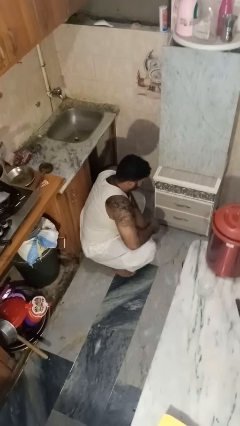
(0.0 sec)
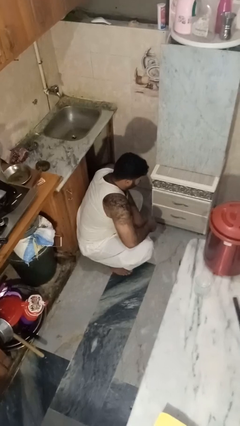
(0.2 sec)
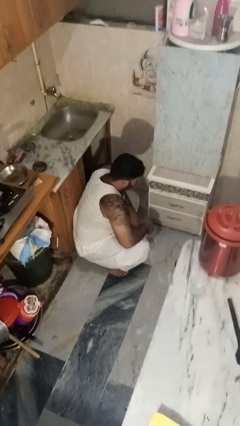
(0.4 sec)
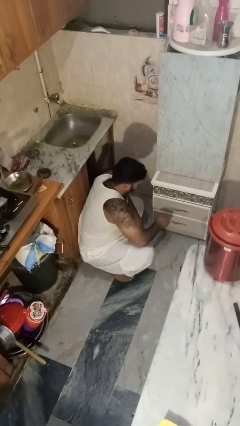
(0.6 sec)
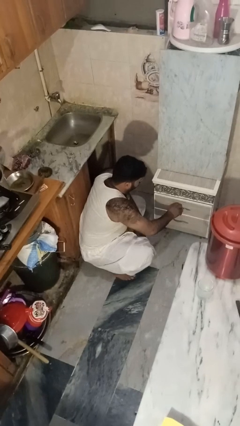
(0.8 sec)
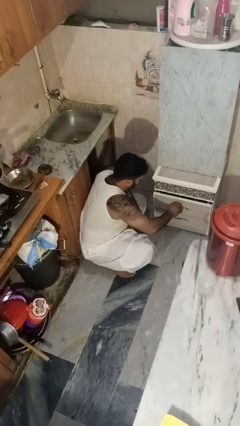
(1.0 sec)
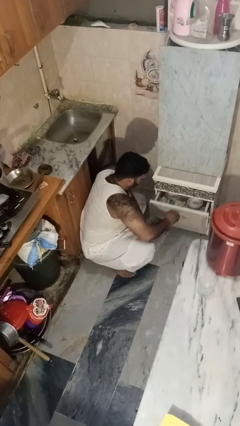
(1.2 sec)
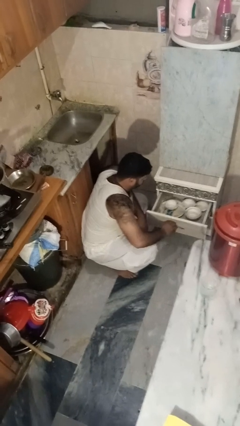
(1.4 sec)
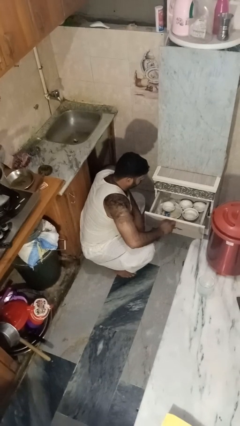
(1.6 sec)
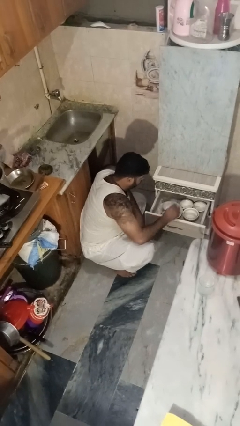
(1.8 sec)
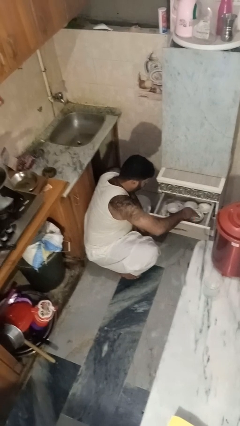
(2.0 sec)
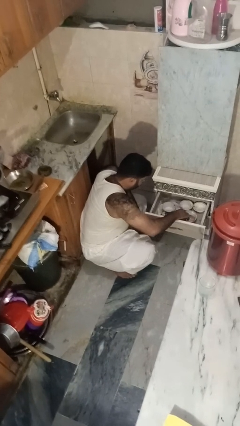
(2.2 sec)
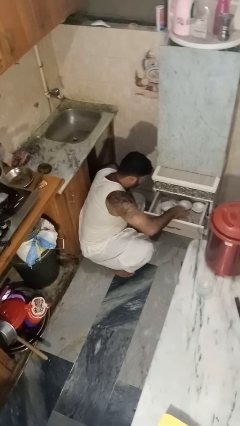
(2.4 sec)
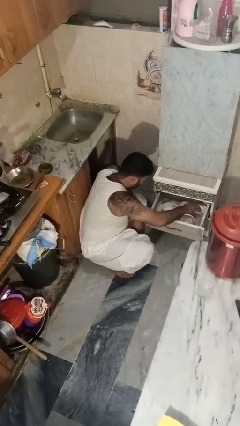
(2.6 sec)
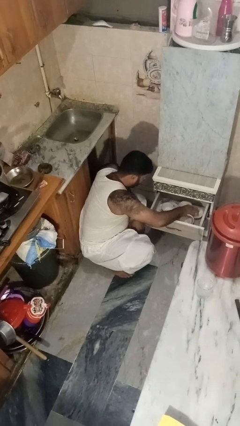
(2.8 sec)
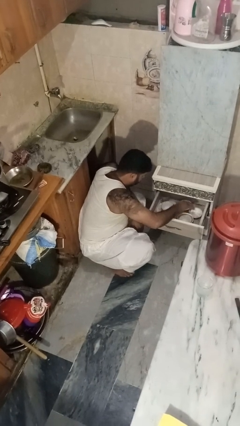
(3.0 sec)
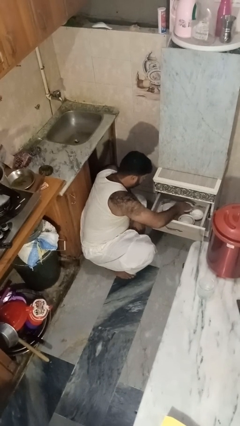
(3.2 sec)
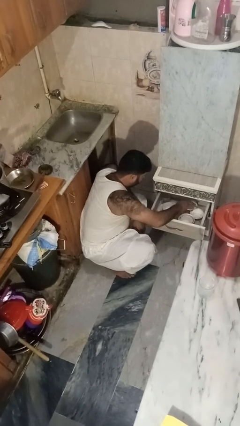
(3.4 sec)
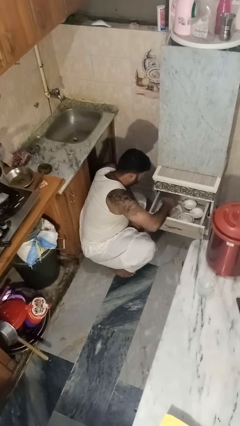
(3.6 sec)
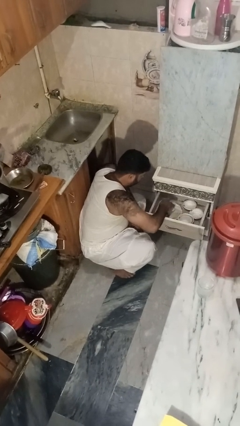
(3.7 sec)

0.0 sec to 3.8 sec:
person searches in kitchen drawer

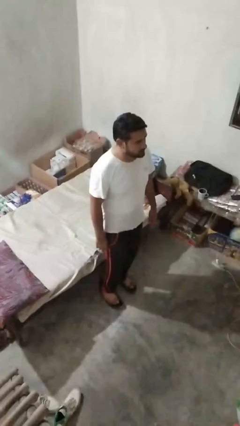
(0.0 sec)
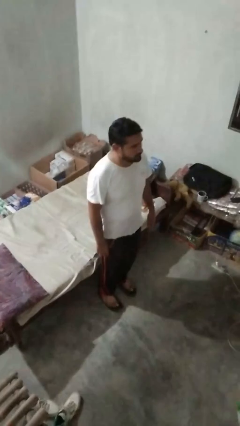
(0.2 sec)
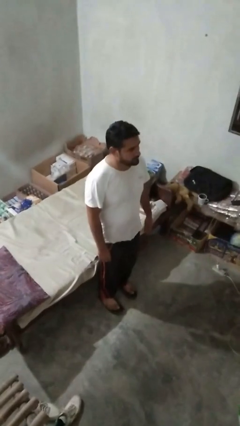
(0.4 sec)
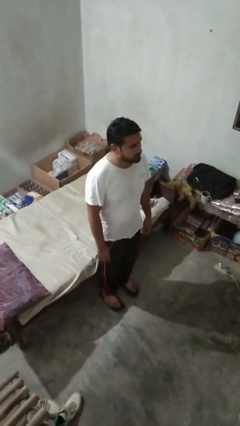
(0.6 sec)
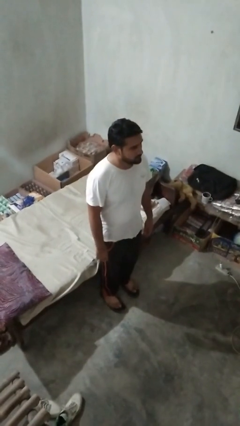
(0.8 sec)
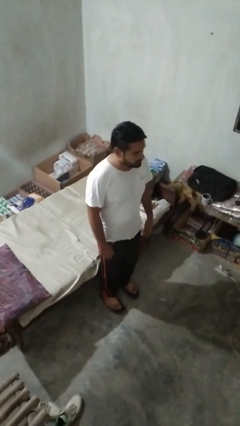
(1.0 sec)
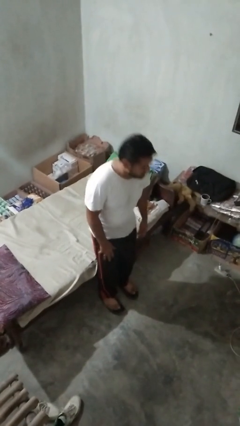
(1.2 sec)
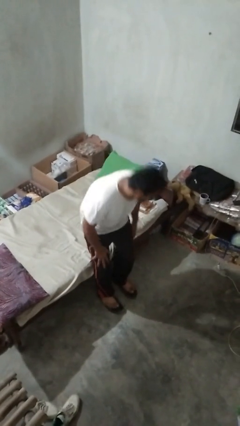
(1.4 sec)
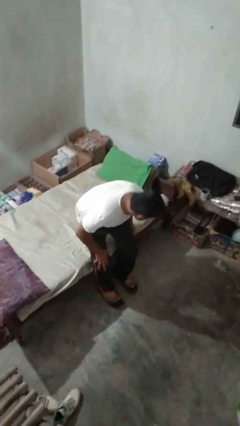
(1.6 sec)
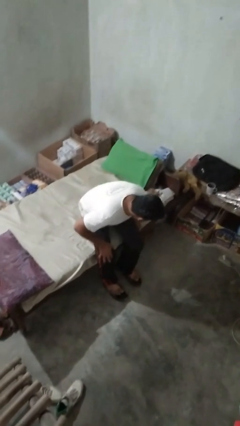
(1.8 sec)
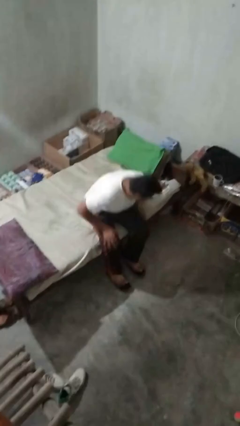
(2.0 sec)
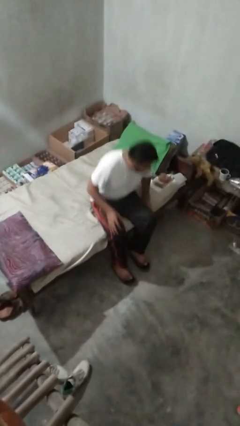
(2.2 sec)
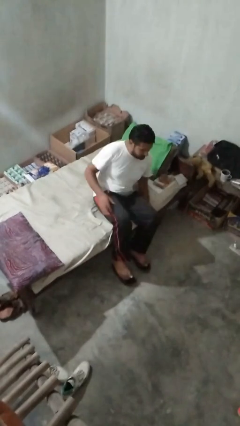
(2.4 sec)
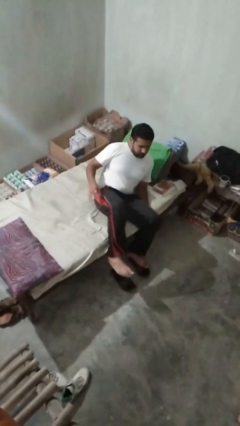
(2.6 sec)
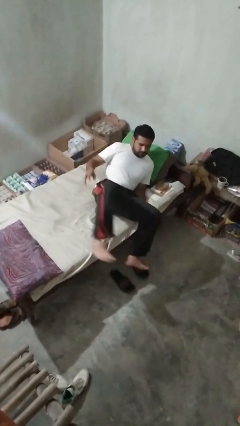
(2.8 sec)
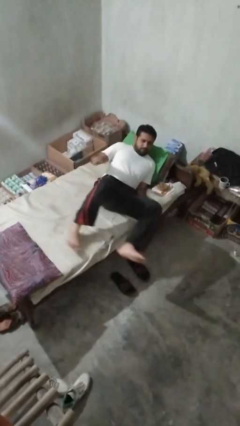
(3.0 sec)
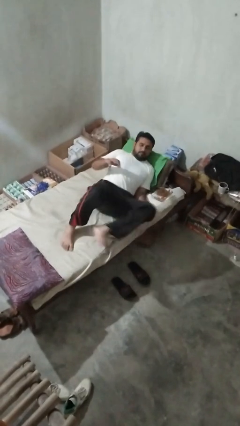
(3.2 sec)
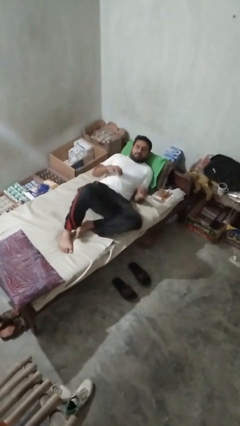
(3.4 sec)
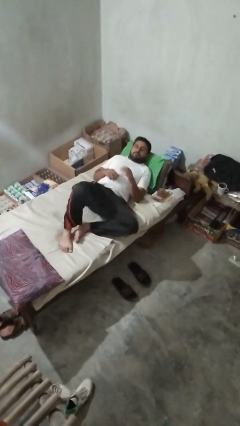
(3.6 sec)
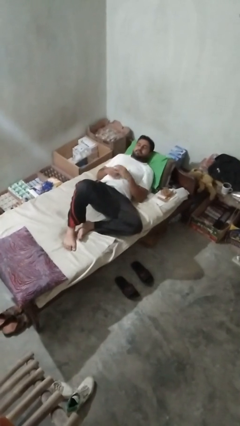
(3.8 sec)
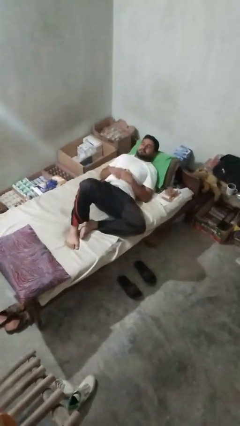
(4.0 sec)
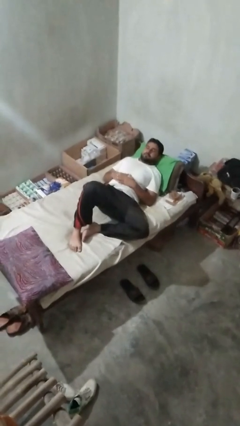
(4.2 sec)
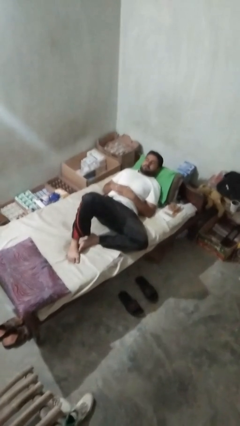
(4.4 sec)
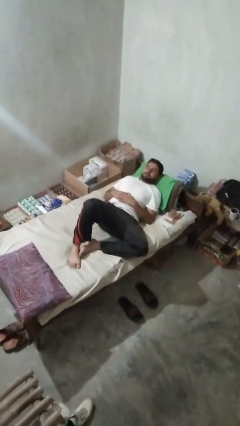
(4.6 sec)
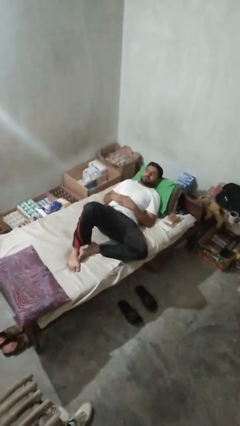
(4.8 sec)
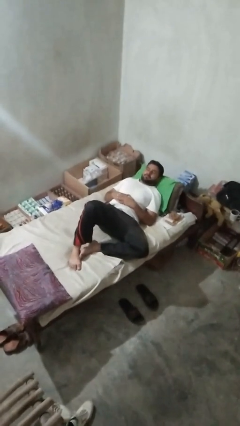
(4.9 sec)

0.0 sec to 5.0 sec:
person lies down on bed

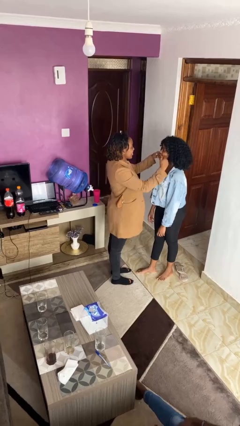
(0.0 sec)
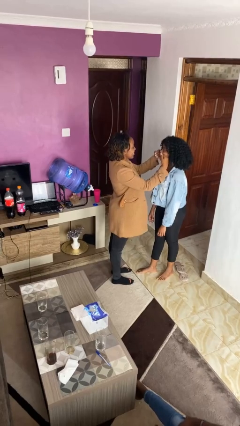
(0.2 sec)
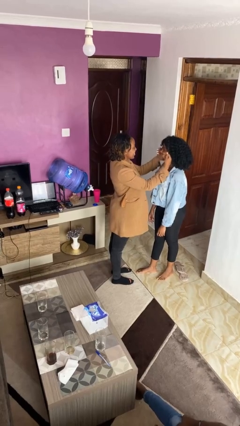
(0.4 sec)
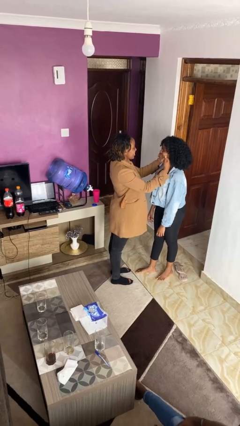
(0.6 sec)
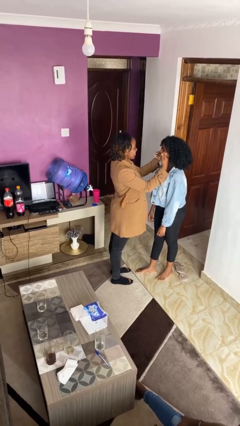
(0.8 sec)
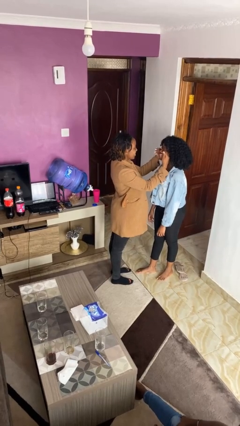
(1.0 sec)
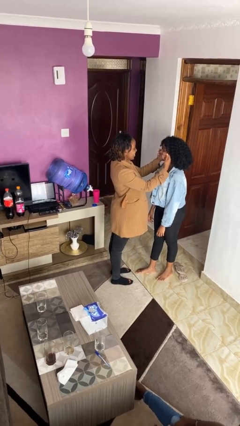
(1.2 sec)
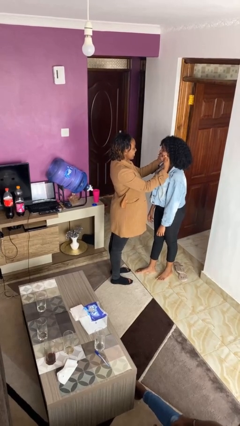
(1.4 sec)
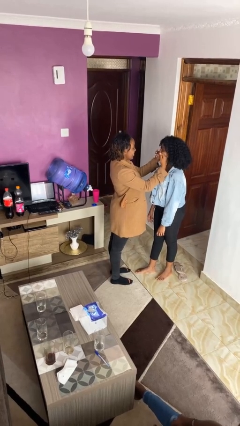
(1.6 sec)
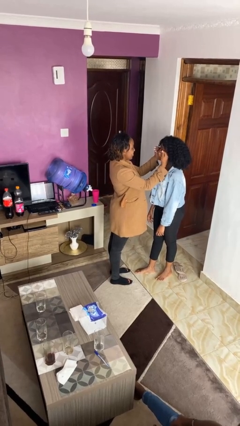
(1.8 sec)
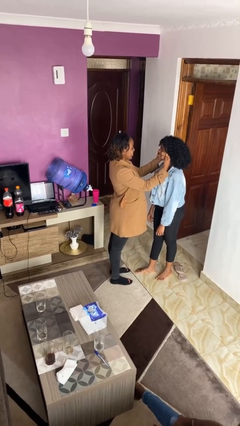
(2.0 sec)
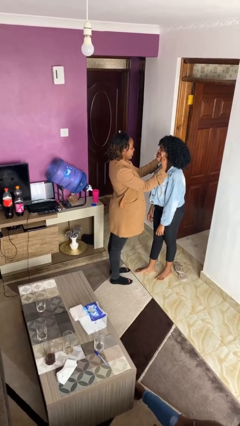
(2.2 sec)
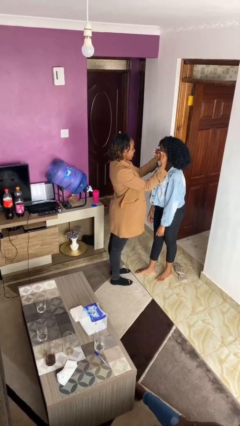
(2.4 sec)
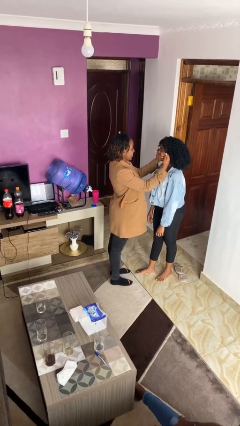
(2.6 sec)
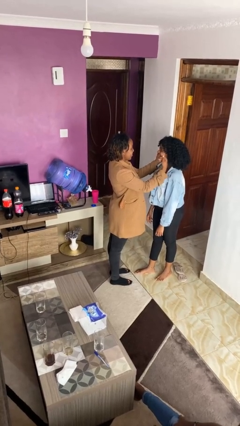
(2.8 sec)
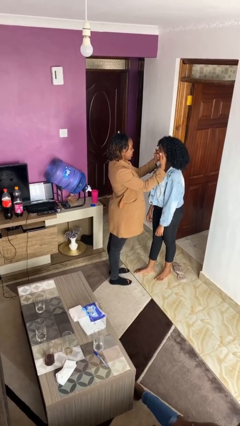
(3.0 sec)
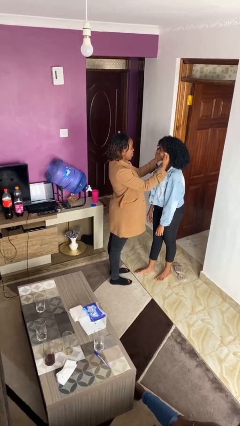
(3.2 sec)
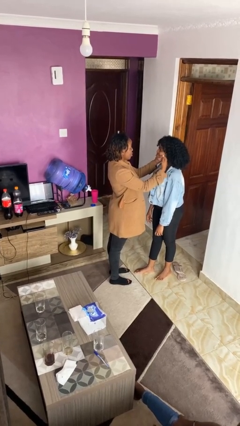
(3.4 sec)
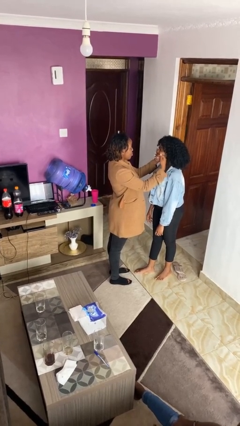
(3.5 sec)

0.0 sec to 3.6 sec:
person touches face of person

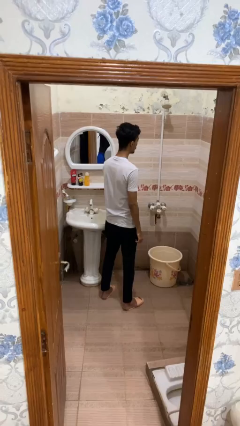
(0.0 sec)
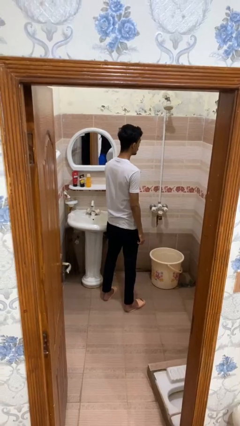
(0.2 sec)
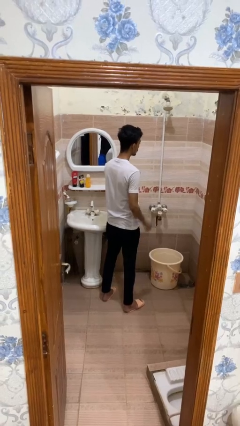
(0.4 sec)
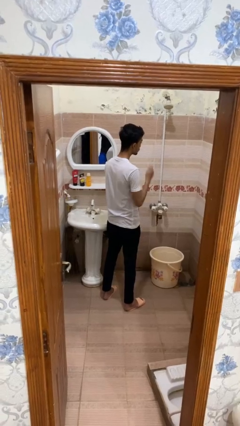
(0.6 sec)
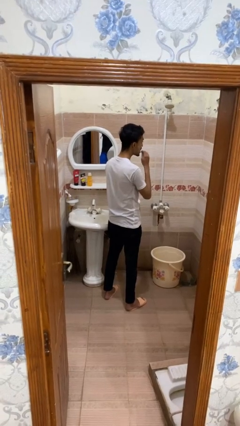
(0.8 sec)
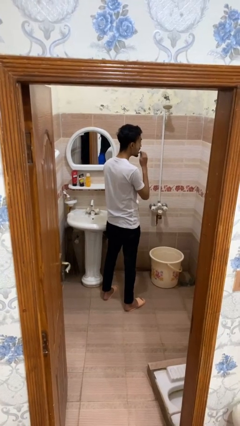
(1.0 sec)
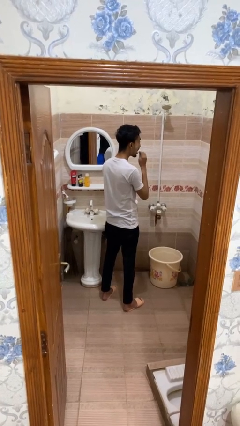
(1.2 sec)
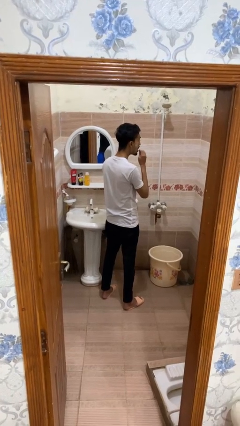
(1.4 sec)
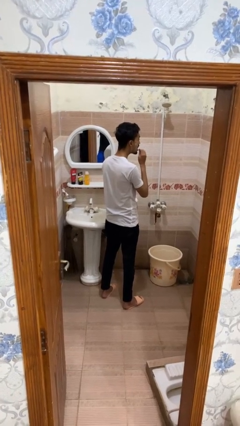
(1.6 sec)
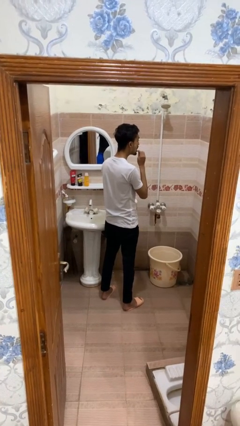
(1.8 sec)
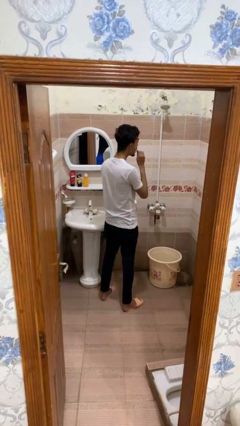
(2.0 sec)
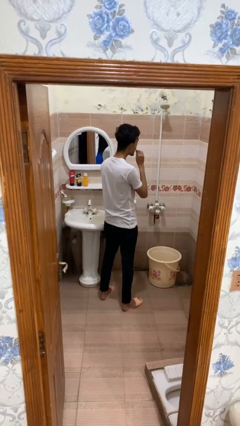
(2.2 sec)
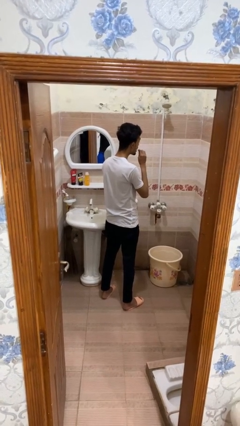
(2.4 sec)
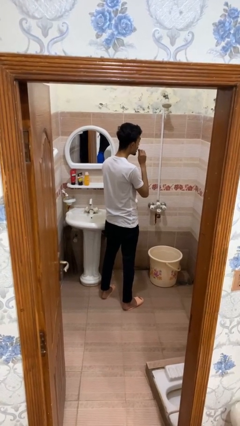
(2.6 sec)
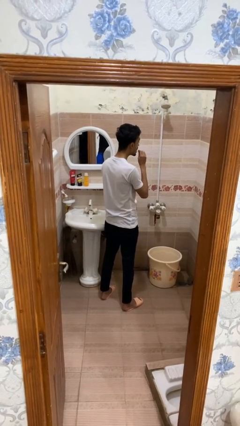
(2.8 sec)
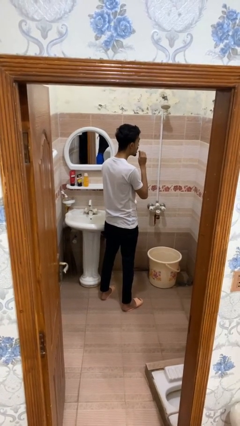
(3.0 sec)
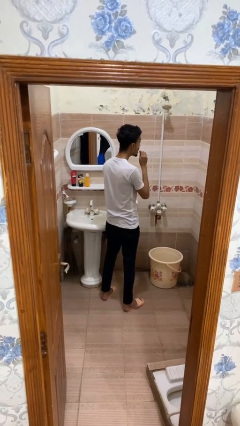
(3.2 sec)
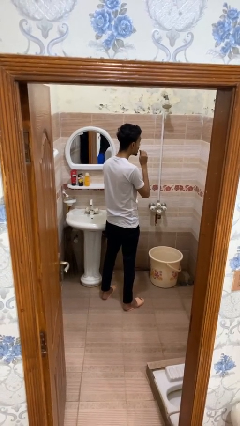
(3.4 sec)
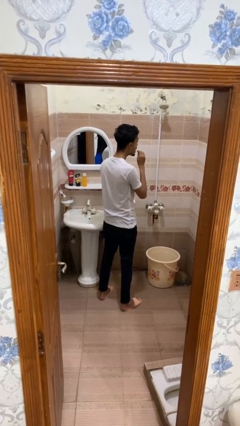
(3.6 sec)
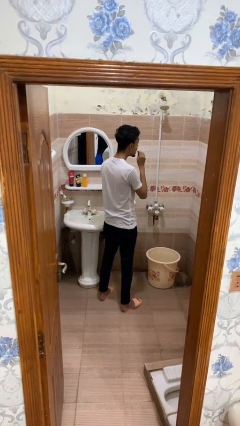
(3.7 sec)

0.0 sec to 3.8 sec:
person flosses

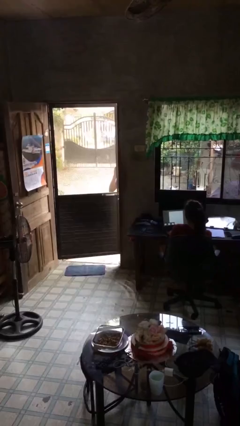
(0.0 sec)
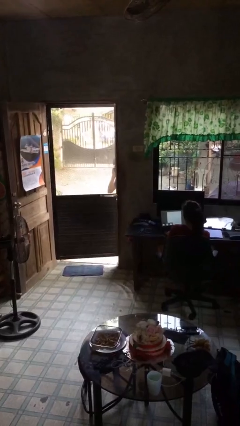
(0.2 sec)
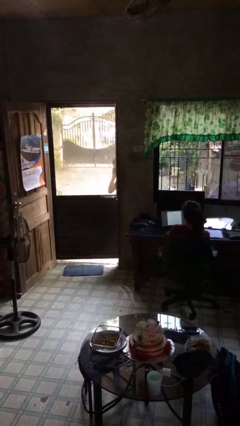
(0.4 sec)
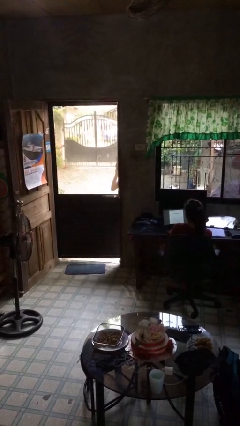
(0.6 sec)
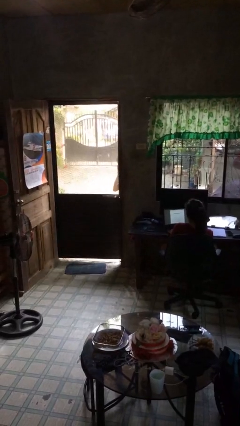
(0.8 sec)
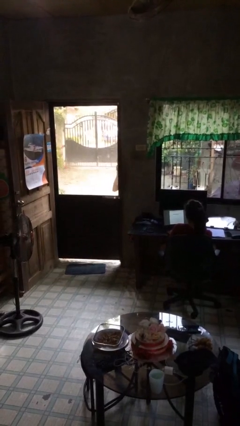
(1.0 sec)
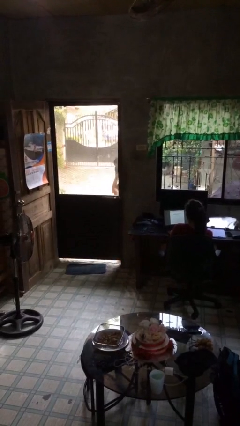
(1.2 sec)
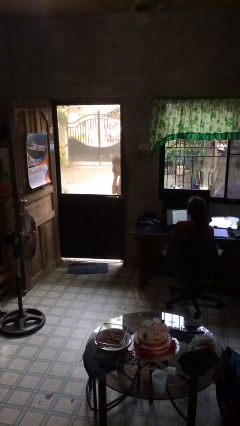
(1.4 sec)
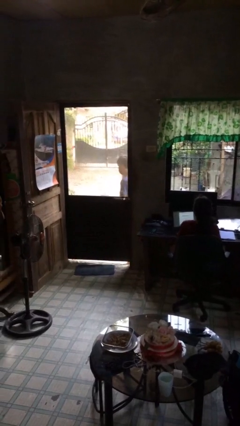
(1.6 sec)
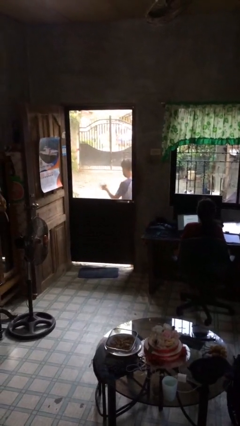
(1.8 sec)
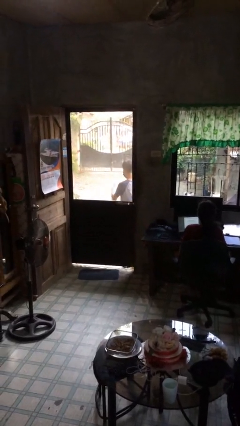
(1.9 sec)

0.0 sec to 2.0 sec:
person closes facility door
